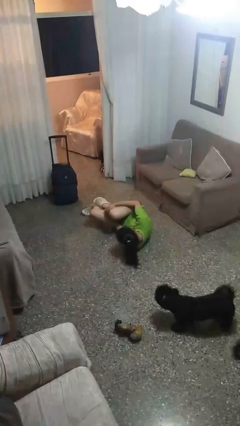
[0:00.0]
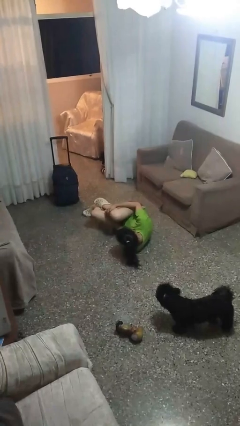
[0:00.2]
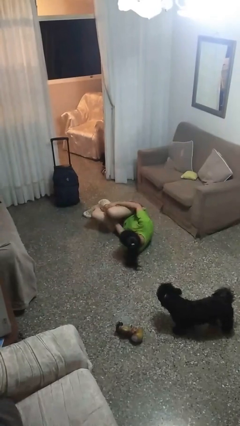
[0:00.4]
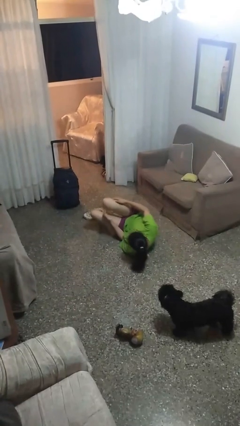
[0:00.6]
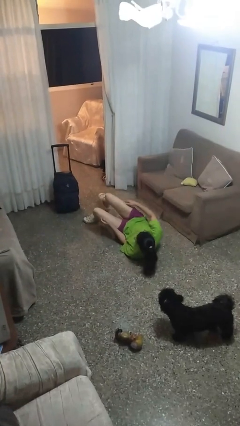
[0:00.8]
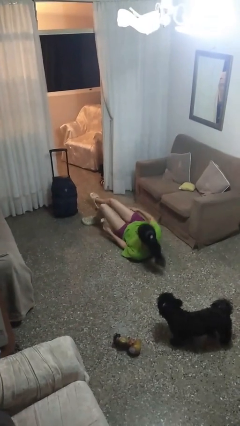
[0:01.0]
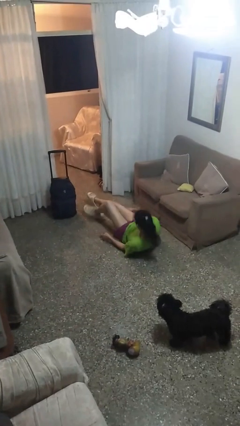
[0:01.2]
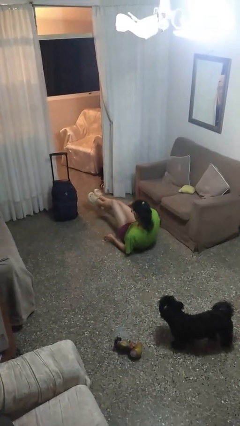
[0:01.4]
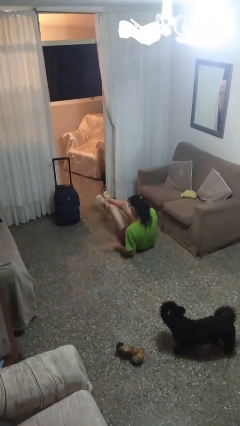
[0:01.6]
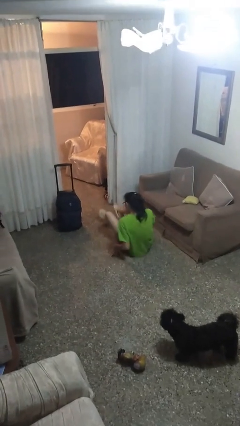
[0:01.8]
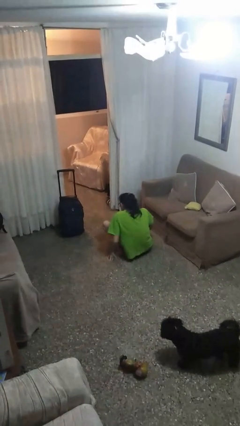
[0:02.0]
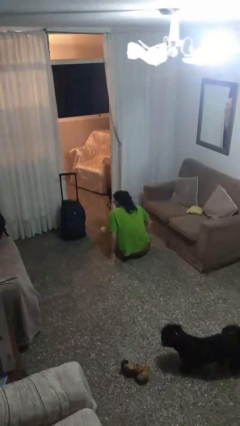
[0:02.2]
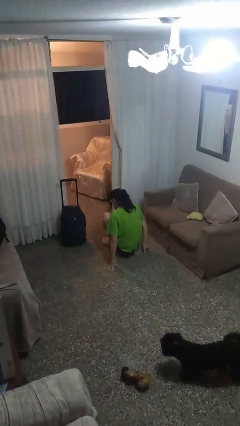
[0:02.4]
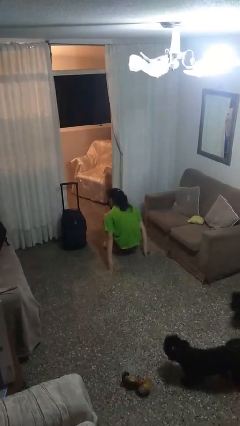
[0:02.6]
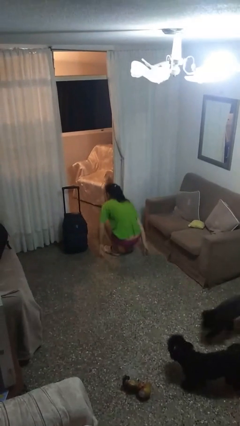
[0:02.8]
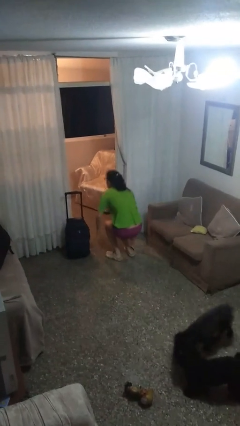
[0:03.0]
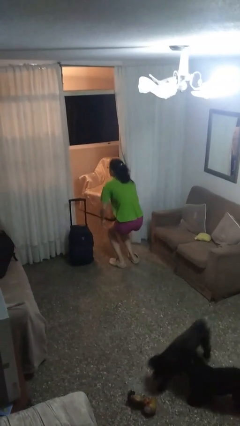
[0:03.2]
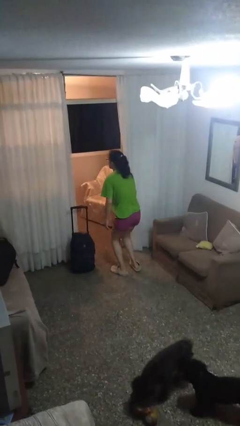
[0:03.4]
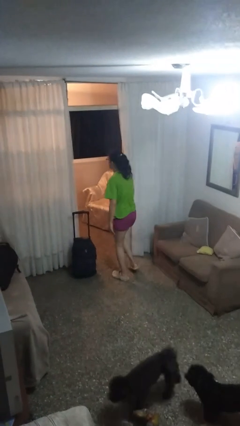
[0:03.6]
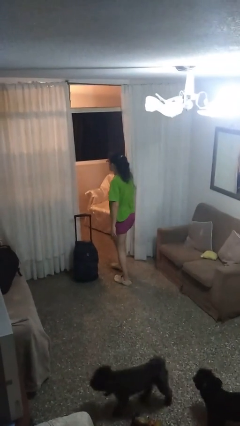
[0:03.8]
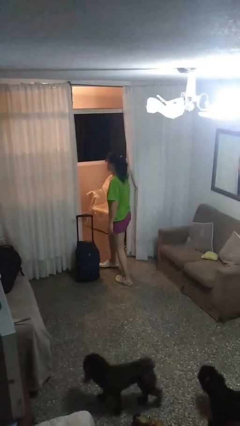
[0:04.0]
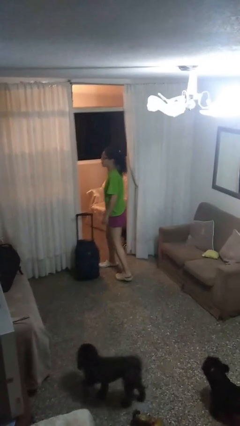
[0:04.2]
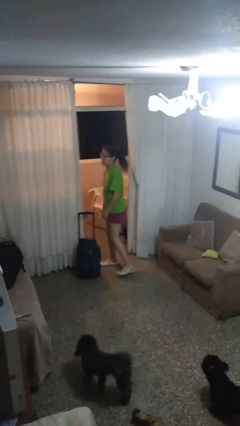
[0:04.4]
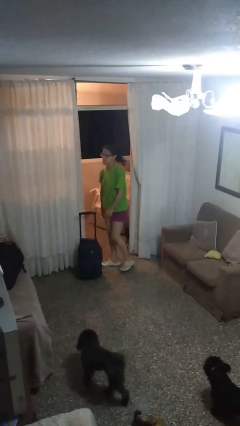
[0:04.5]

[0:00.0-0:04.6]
person stands up from floor

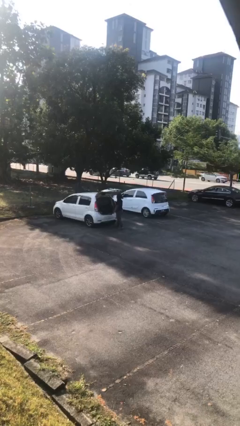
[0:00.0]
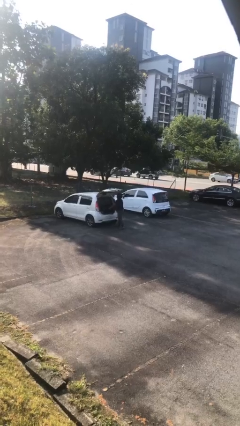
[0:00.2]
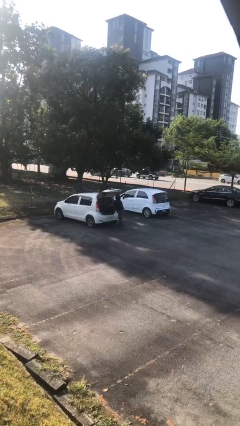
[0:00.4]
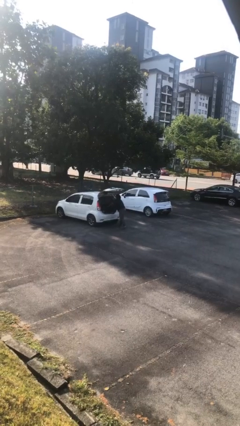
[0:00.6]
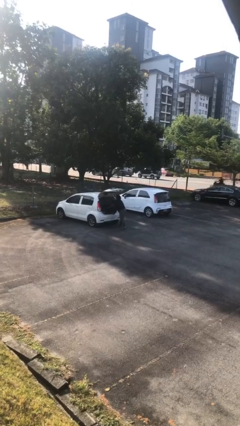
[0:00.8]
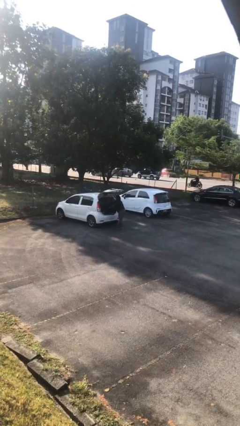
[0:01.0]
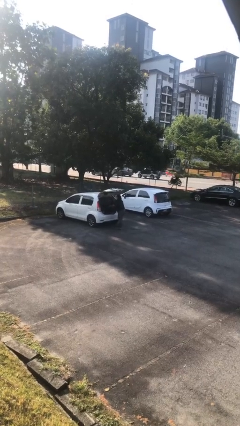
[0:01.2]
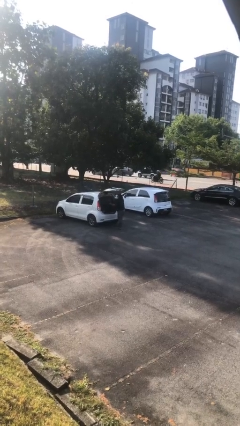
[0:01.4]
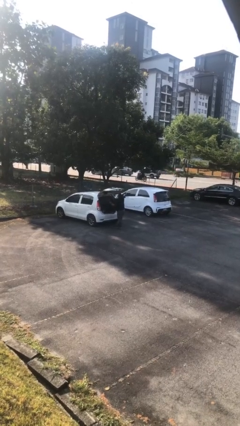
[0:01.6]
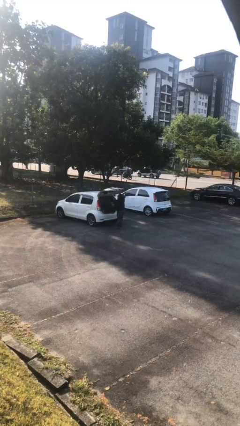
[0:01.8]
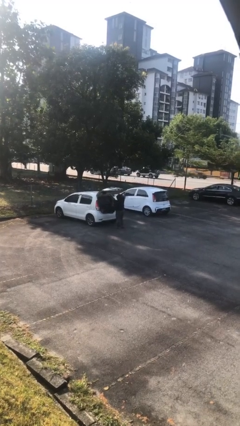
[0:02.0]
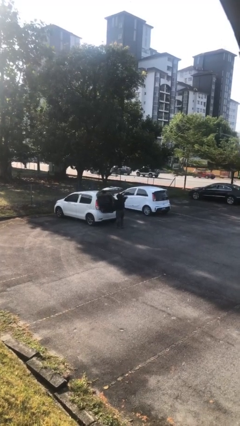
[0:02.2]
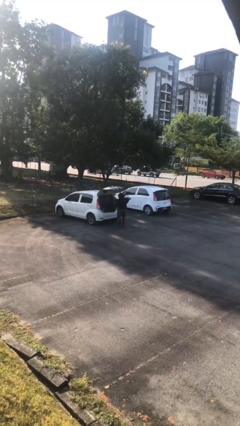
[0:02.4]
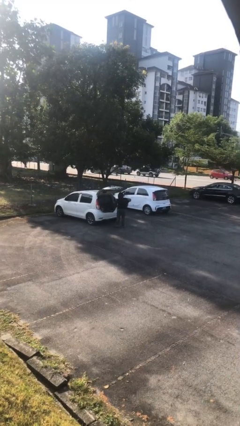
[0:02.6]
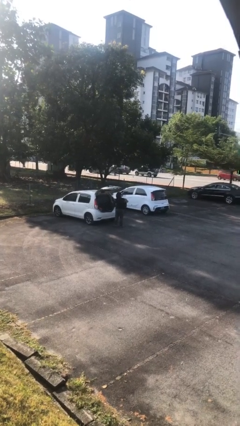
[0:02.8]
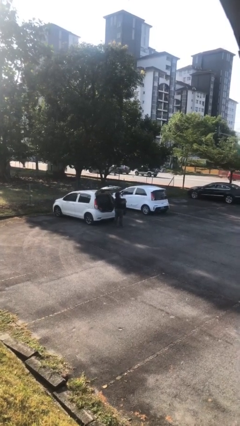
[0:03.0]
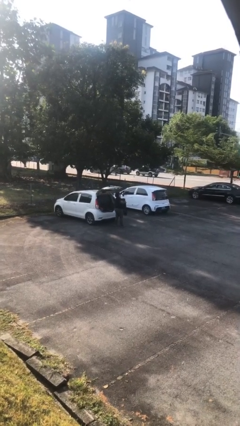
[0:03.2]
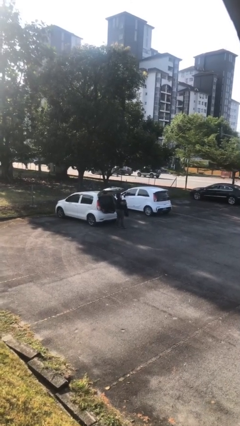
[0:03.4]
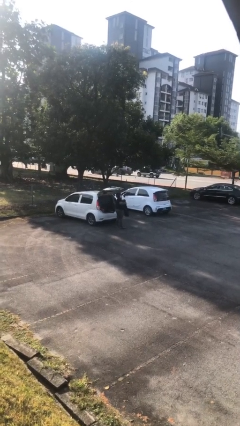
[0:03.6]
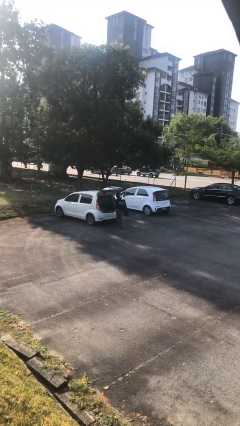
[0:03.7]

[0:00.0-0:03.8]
person unloads car

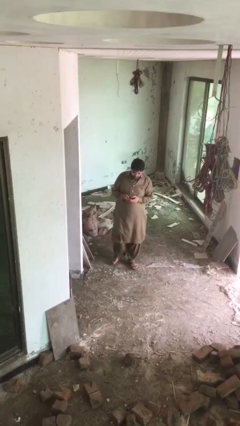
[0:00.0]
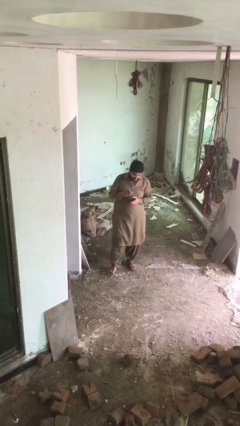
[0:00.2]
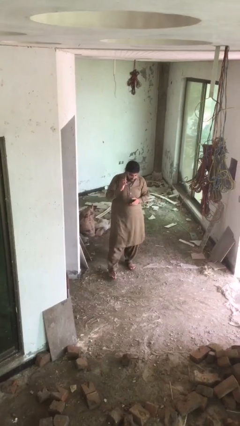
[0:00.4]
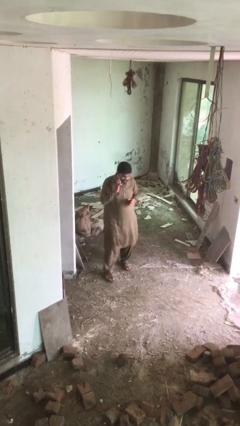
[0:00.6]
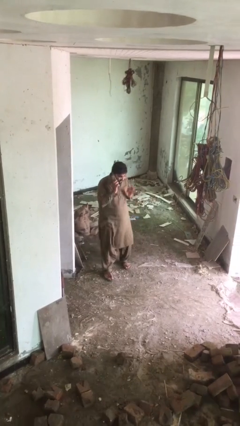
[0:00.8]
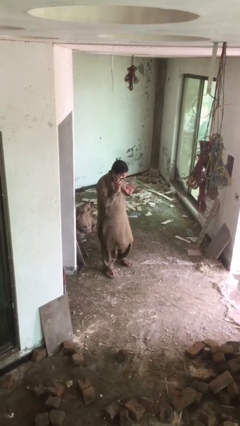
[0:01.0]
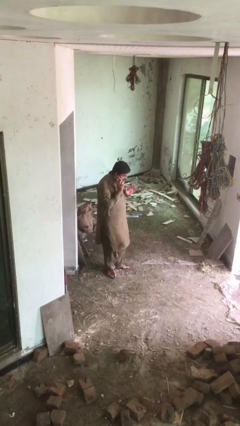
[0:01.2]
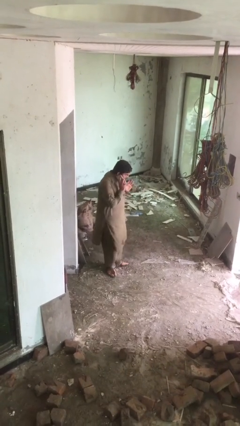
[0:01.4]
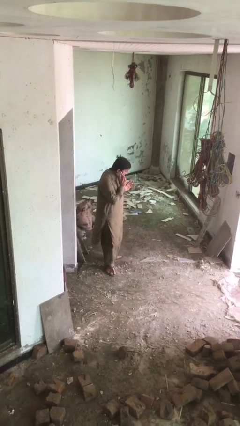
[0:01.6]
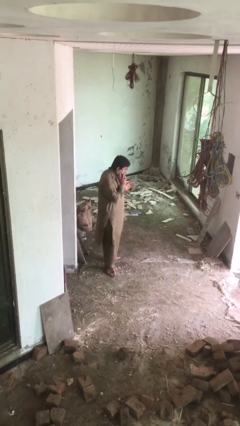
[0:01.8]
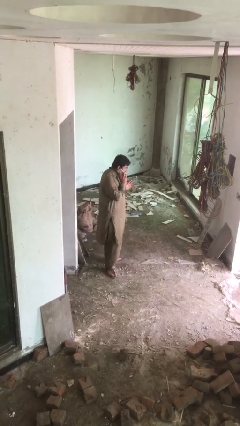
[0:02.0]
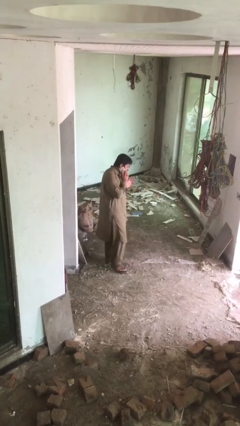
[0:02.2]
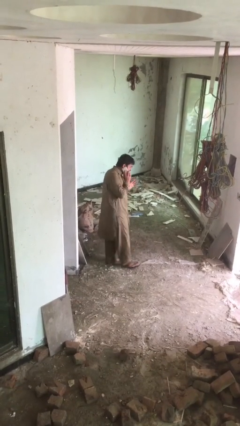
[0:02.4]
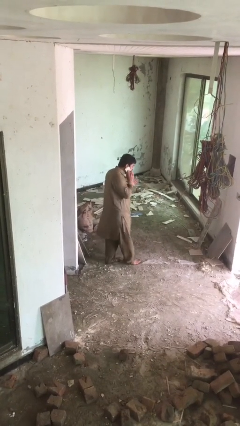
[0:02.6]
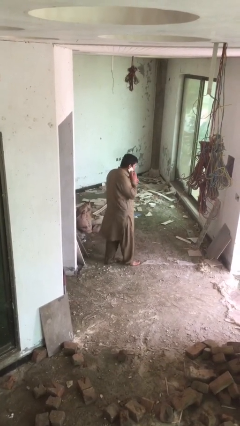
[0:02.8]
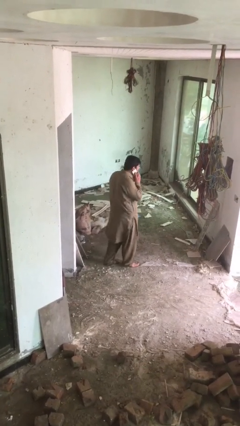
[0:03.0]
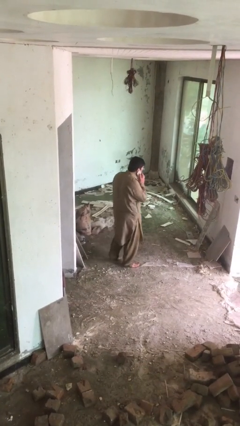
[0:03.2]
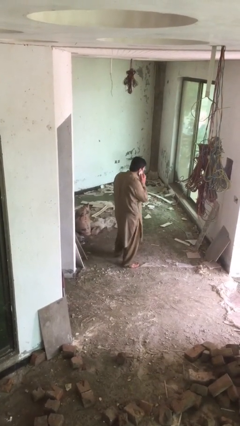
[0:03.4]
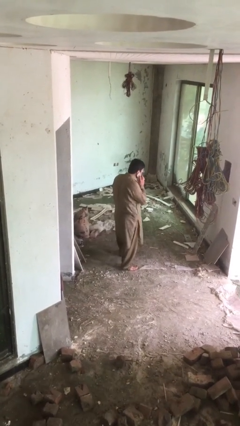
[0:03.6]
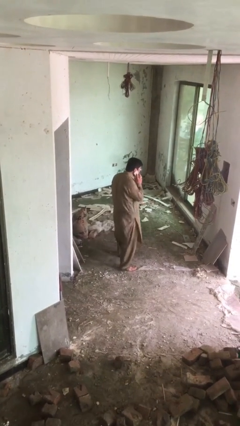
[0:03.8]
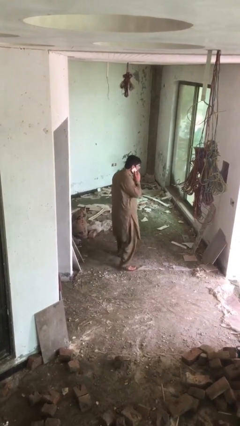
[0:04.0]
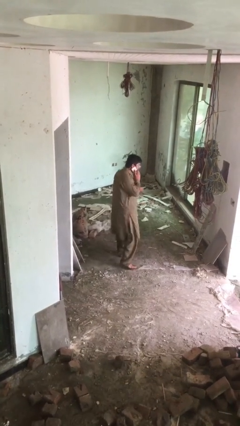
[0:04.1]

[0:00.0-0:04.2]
person talks on phone

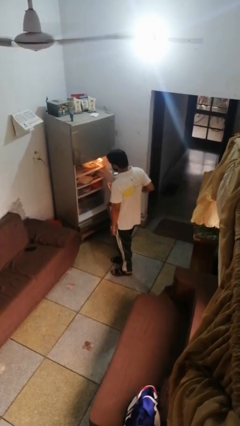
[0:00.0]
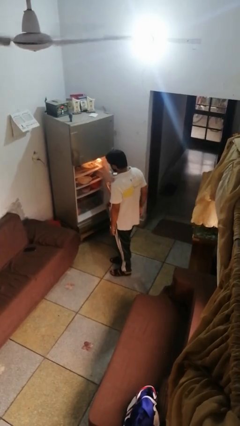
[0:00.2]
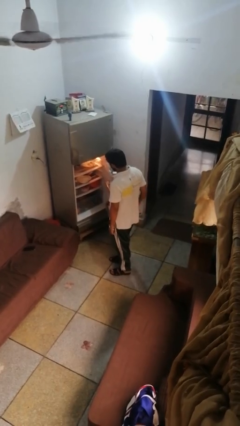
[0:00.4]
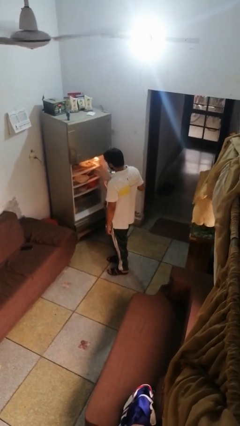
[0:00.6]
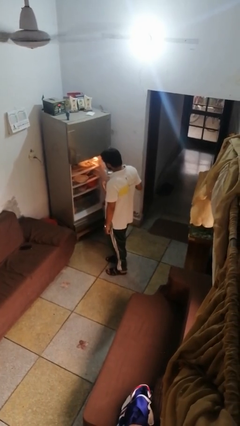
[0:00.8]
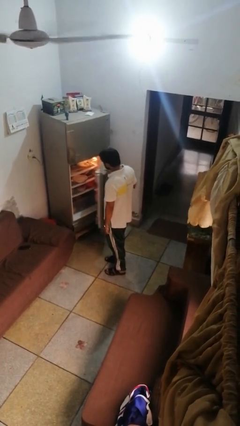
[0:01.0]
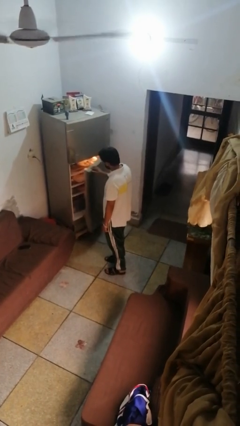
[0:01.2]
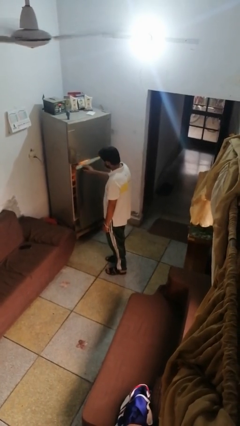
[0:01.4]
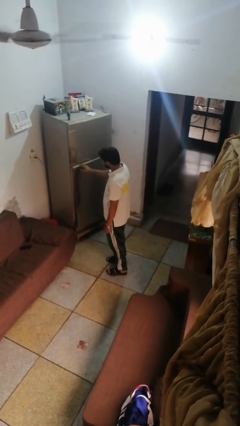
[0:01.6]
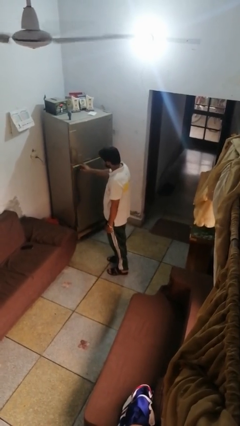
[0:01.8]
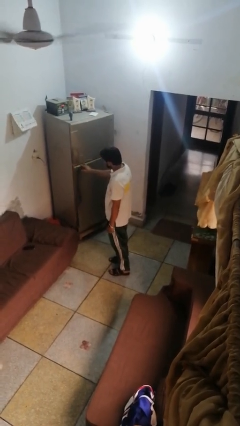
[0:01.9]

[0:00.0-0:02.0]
person closes refrigerator

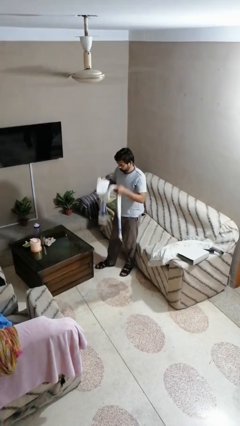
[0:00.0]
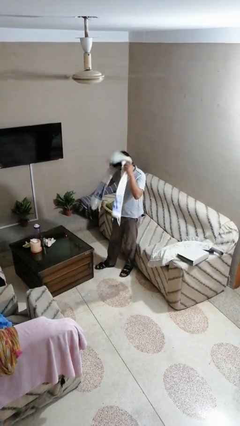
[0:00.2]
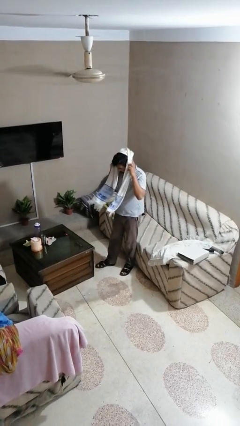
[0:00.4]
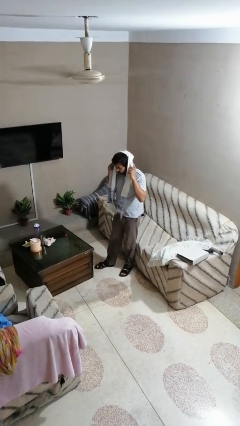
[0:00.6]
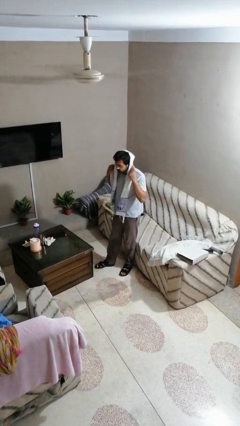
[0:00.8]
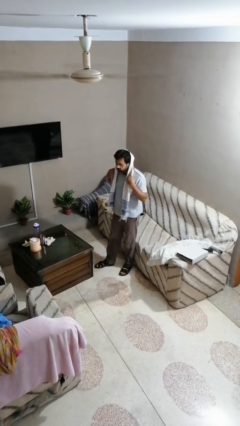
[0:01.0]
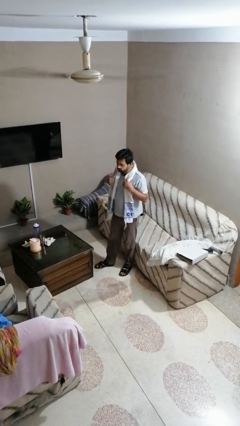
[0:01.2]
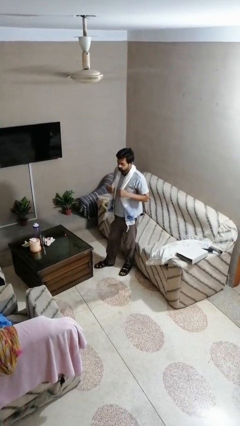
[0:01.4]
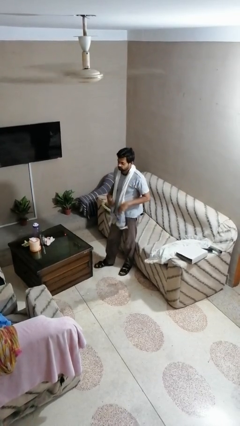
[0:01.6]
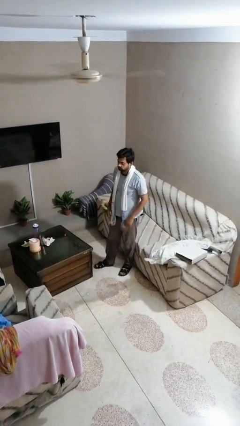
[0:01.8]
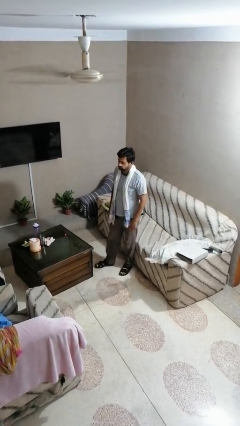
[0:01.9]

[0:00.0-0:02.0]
person puts on scarf

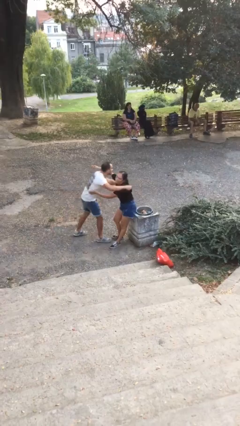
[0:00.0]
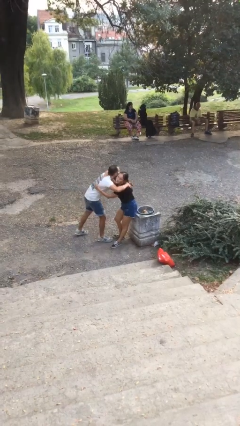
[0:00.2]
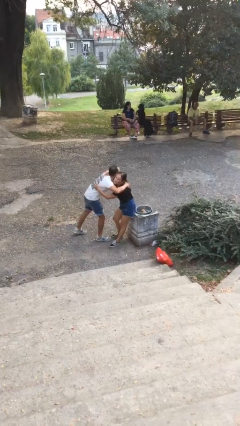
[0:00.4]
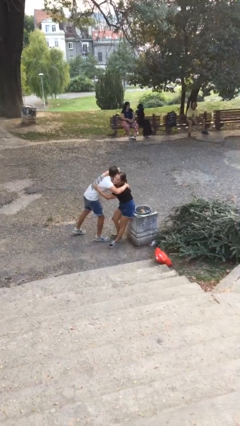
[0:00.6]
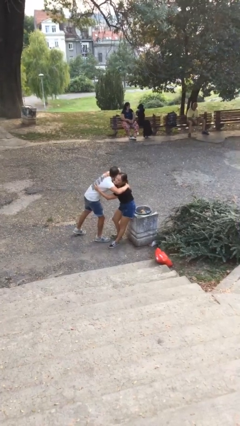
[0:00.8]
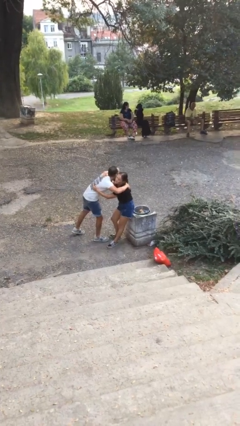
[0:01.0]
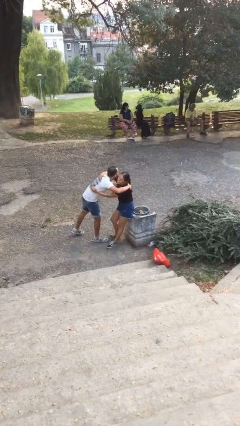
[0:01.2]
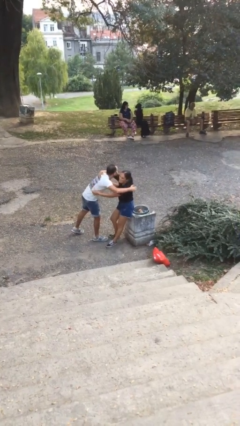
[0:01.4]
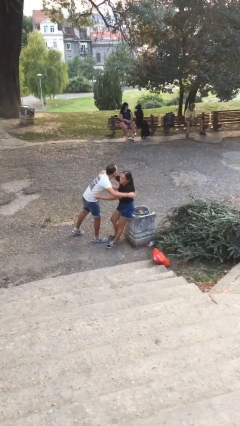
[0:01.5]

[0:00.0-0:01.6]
person embraces person
